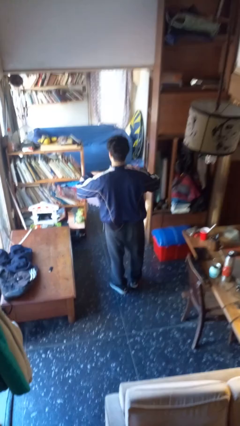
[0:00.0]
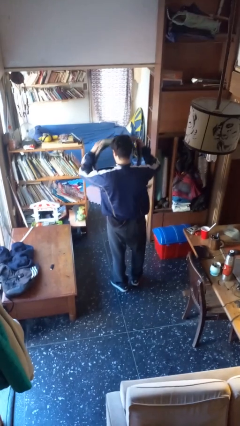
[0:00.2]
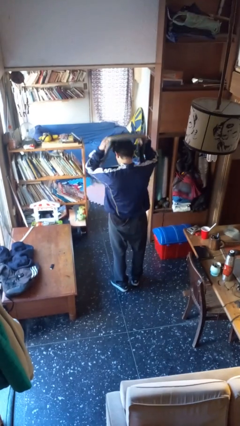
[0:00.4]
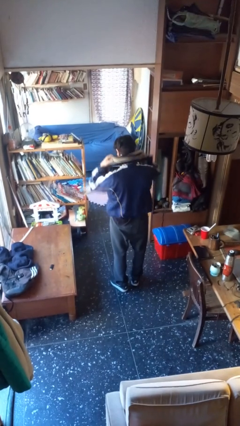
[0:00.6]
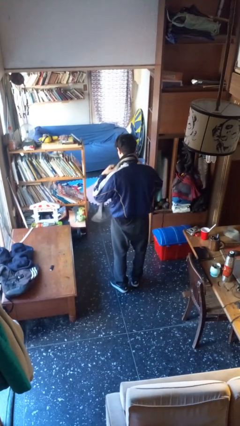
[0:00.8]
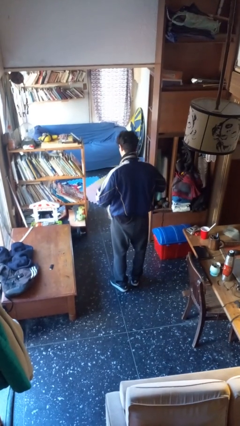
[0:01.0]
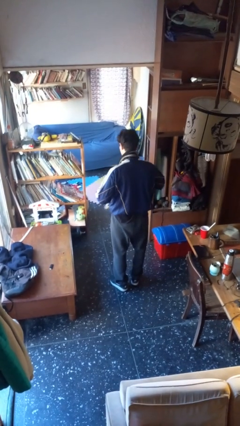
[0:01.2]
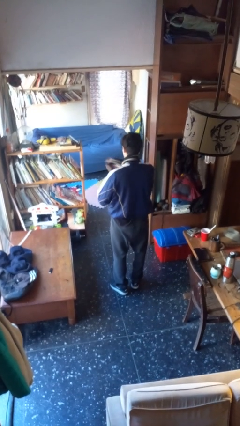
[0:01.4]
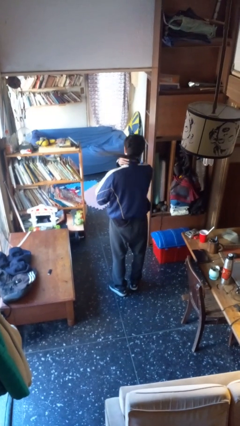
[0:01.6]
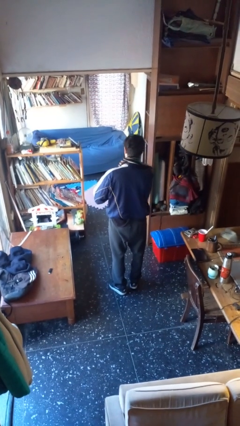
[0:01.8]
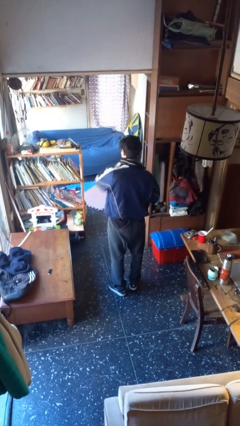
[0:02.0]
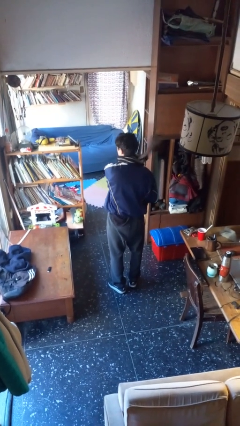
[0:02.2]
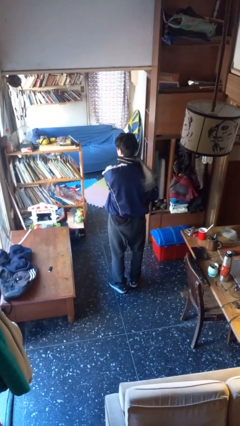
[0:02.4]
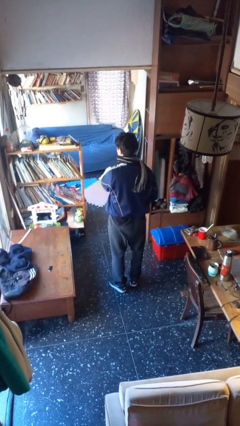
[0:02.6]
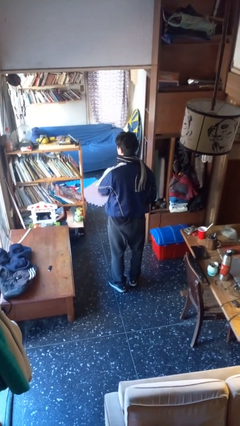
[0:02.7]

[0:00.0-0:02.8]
person puts on scarf

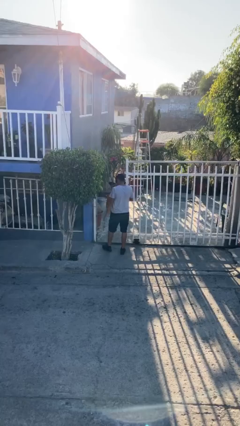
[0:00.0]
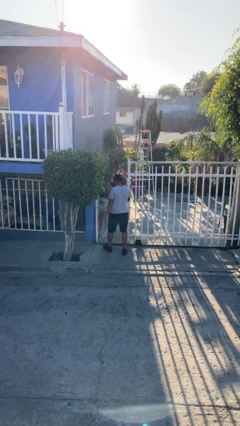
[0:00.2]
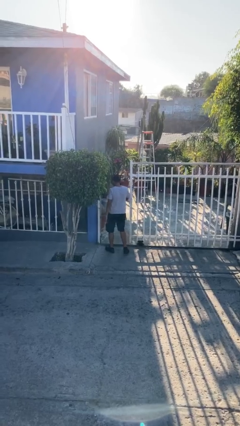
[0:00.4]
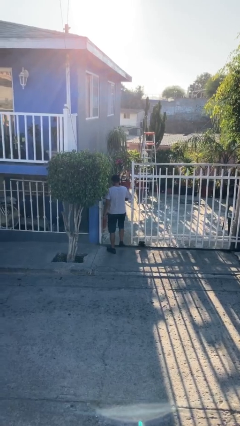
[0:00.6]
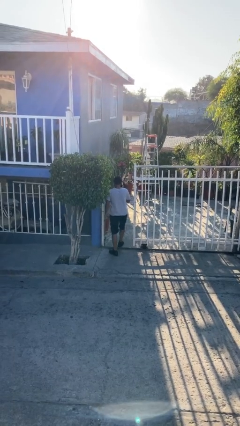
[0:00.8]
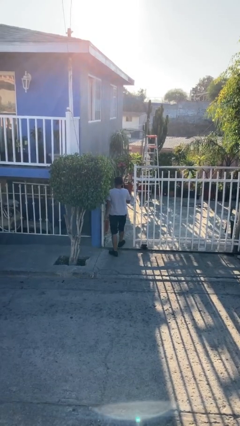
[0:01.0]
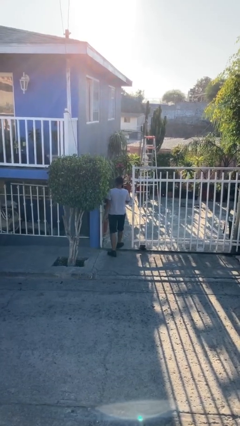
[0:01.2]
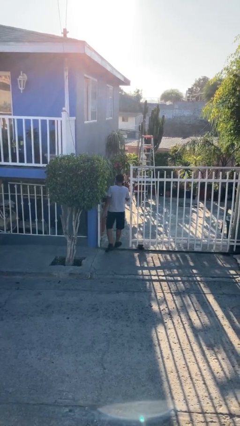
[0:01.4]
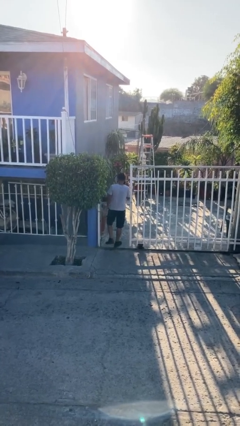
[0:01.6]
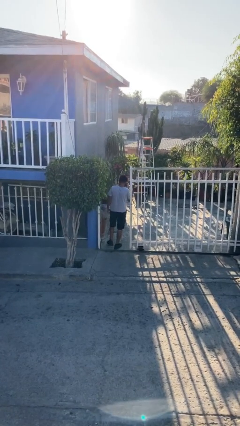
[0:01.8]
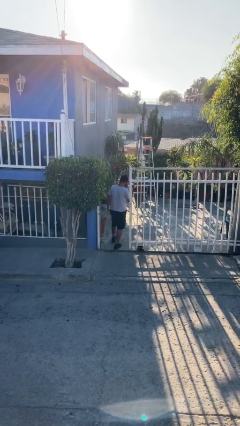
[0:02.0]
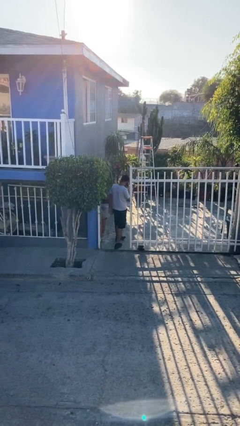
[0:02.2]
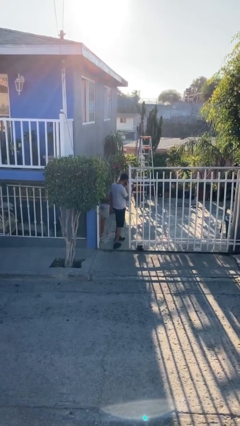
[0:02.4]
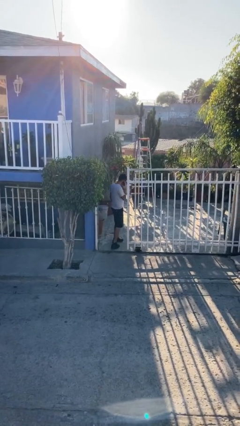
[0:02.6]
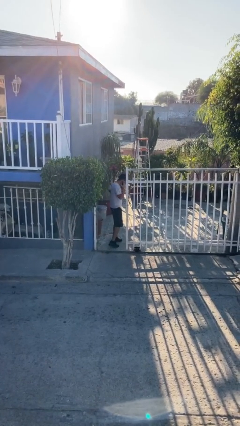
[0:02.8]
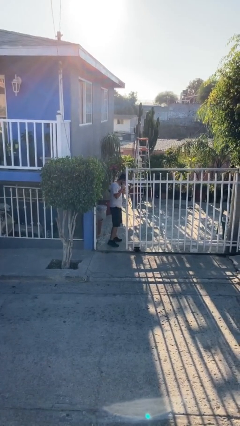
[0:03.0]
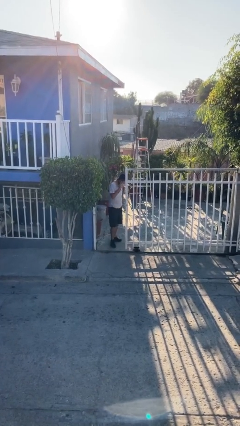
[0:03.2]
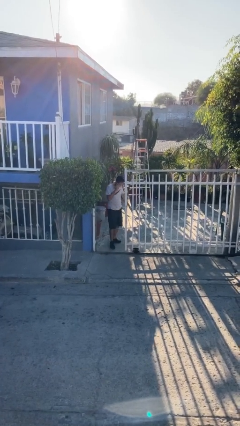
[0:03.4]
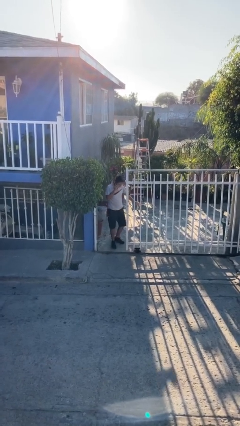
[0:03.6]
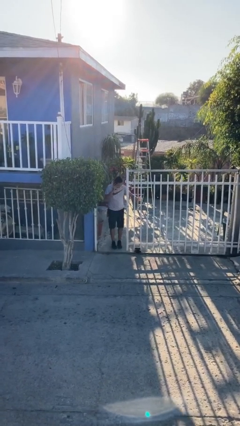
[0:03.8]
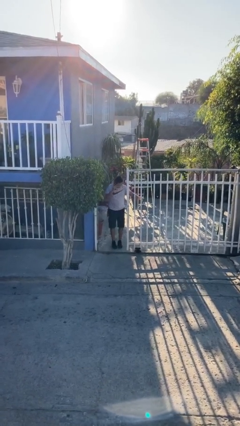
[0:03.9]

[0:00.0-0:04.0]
person exits scene through structure

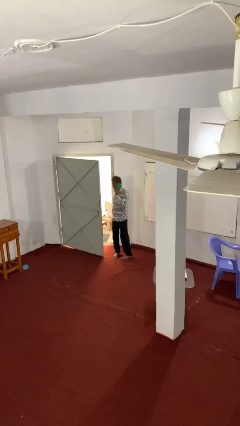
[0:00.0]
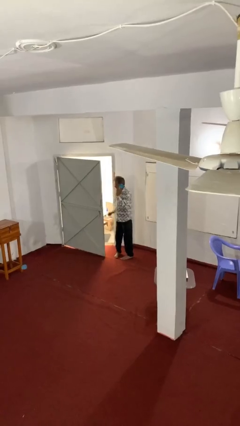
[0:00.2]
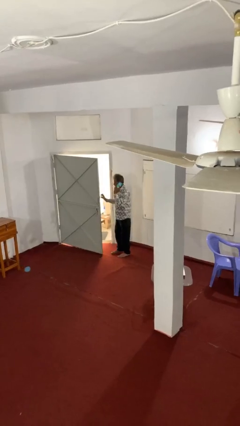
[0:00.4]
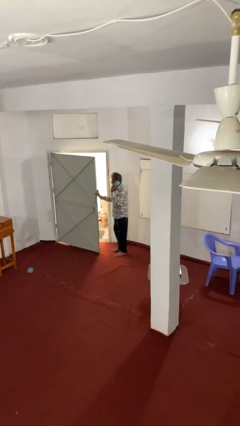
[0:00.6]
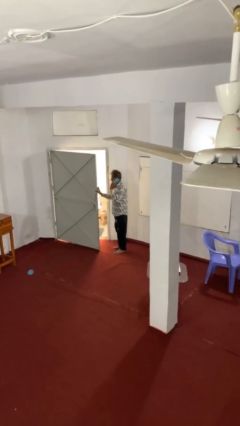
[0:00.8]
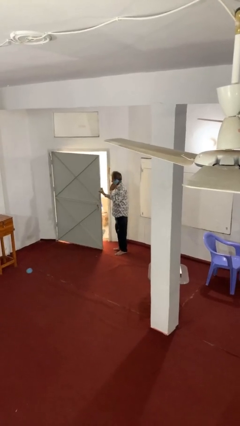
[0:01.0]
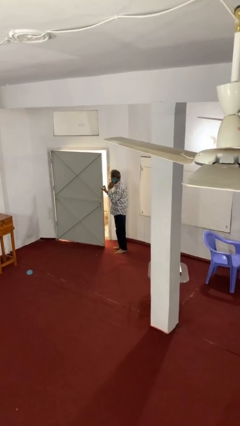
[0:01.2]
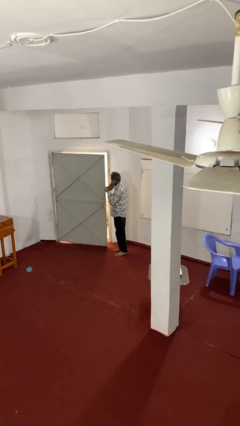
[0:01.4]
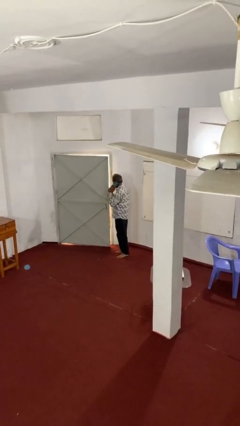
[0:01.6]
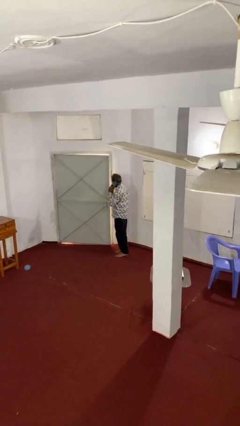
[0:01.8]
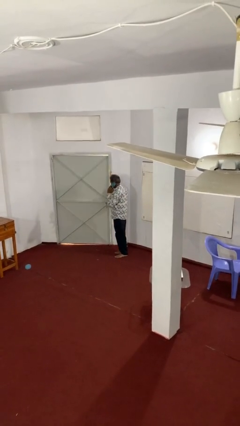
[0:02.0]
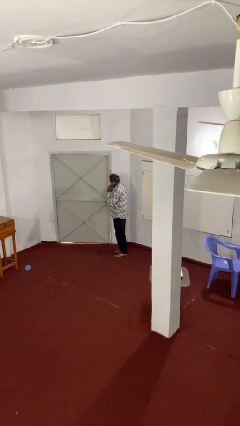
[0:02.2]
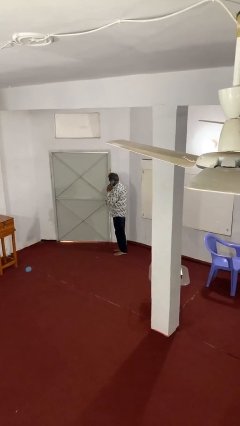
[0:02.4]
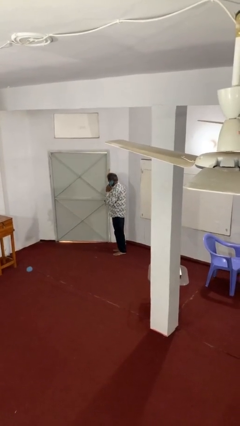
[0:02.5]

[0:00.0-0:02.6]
person closes facility door

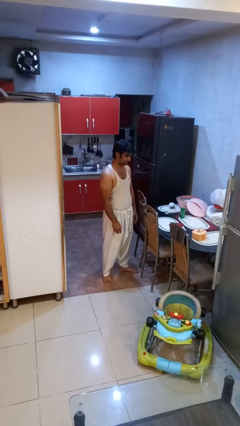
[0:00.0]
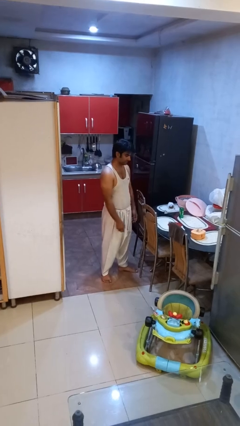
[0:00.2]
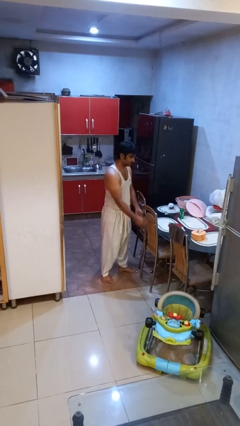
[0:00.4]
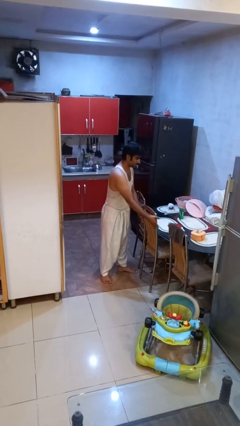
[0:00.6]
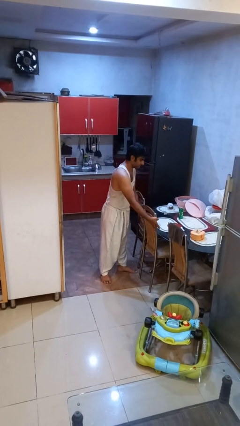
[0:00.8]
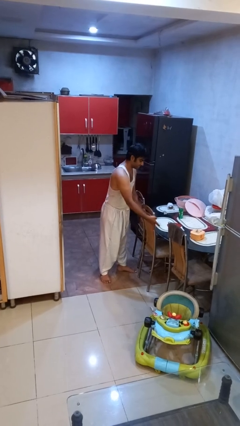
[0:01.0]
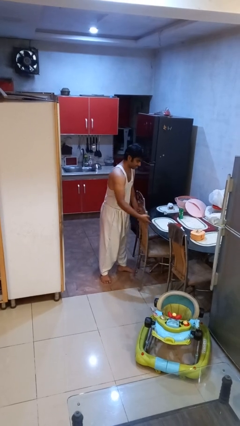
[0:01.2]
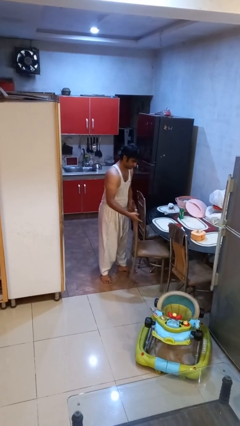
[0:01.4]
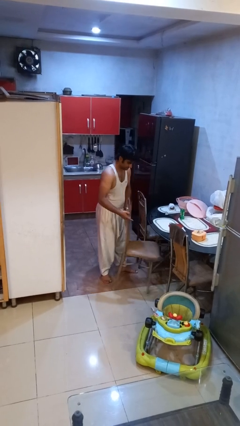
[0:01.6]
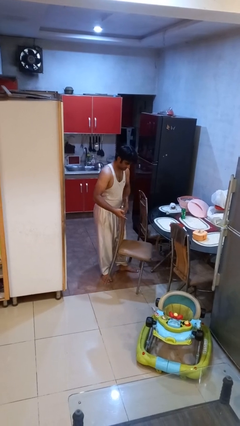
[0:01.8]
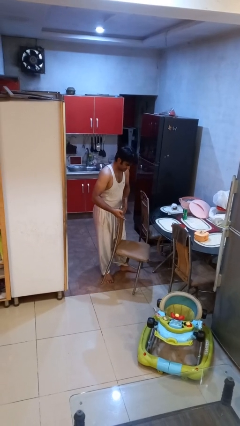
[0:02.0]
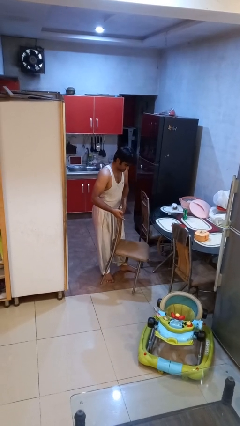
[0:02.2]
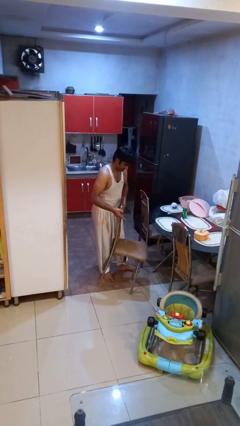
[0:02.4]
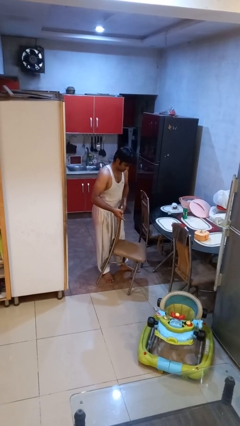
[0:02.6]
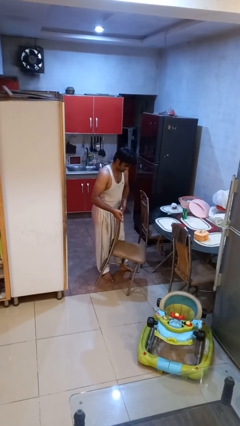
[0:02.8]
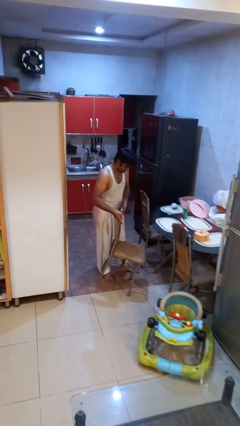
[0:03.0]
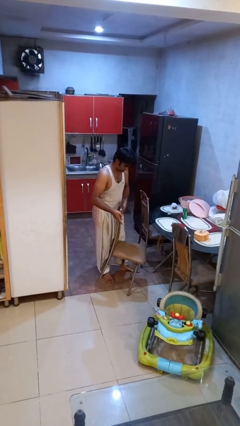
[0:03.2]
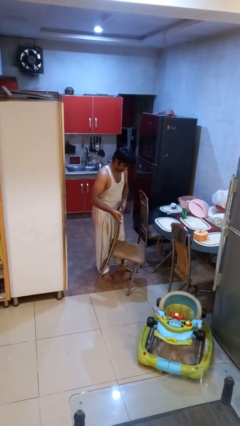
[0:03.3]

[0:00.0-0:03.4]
person pulls out chair

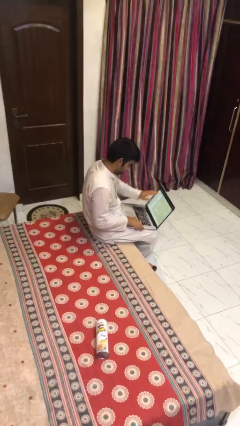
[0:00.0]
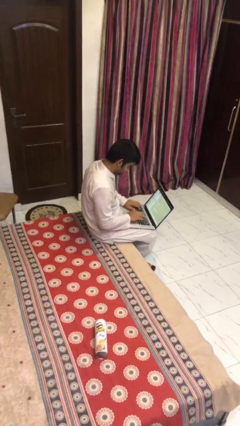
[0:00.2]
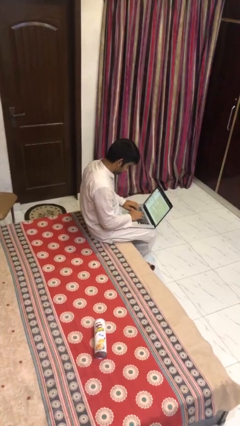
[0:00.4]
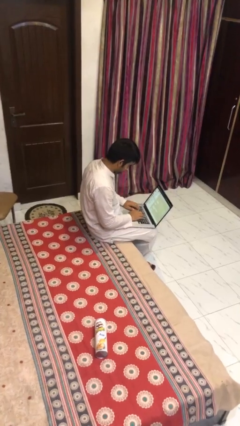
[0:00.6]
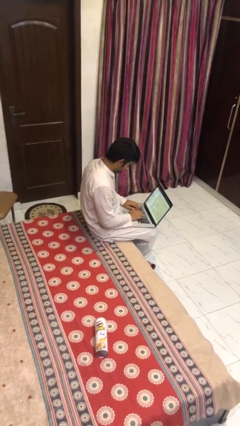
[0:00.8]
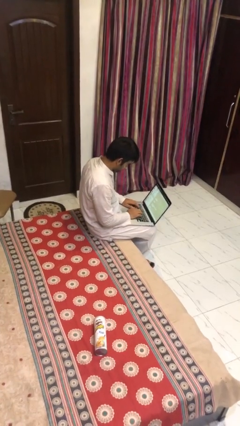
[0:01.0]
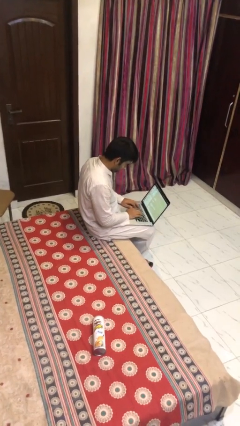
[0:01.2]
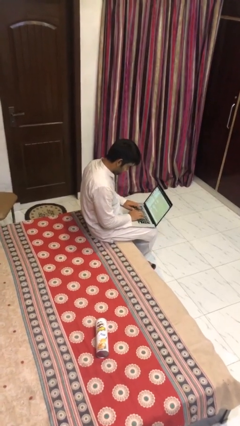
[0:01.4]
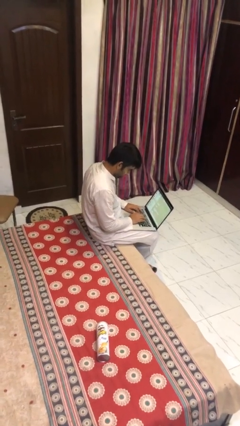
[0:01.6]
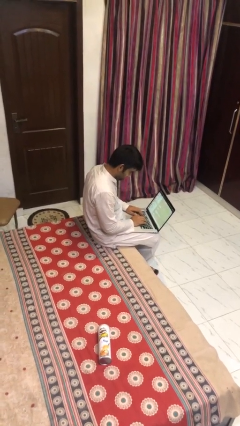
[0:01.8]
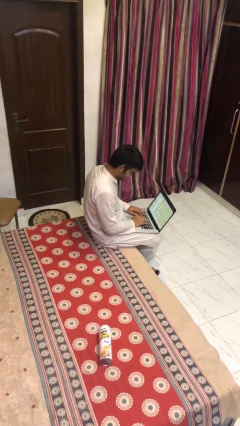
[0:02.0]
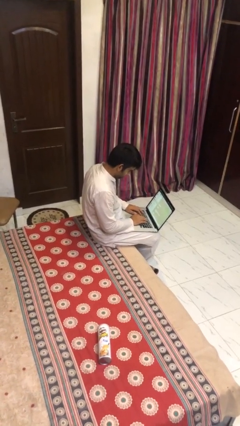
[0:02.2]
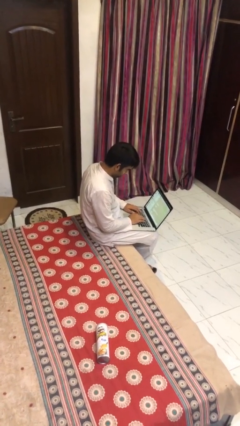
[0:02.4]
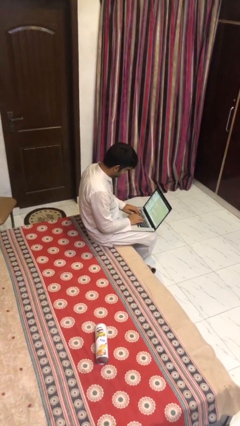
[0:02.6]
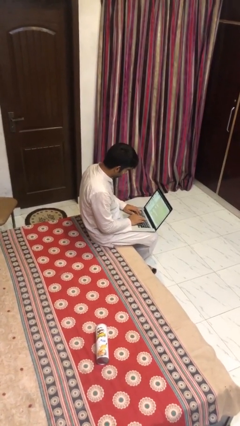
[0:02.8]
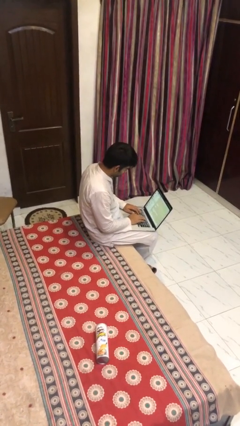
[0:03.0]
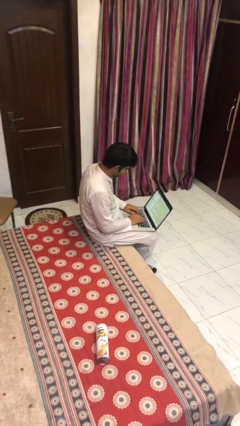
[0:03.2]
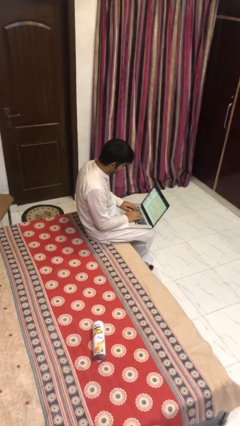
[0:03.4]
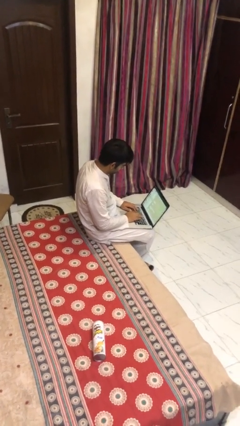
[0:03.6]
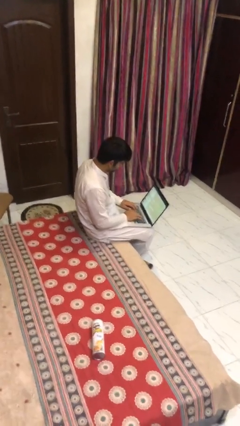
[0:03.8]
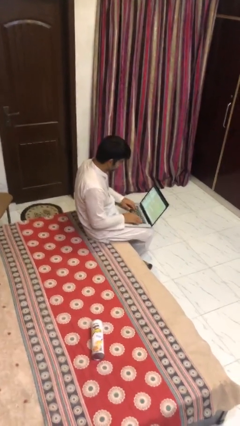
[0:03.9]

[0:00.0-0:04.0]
person interacts with laptop

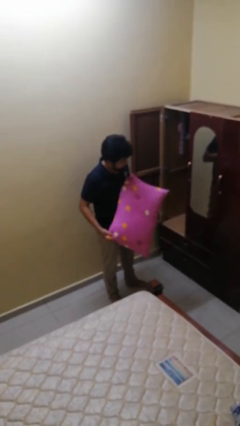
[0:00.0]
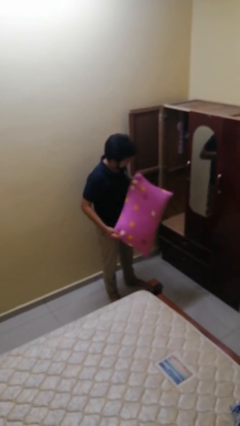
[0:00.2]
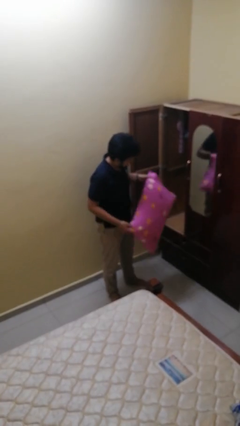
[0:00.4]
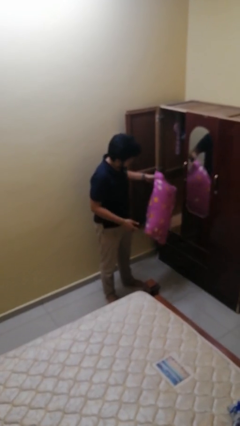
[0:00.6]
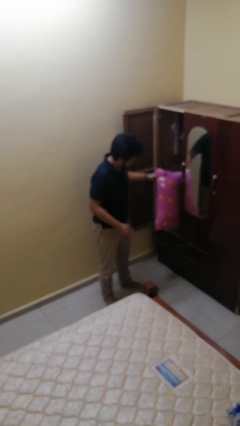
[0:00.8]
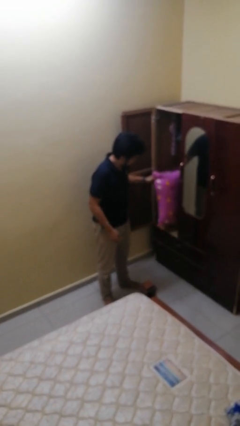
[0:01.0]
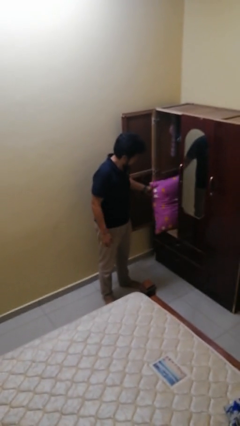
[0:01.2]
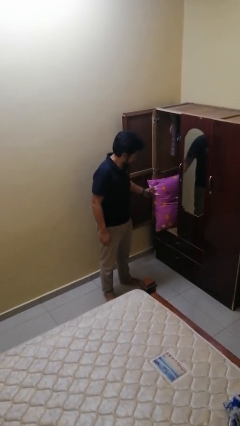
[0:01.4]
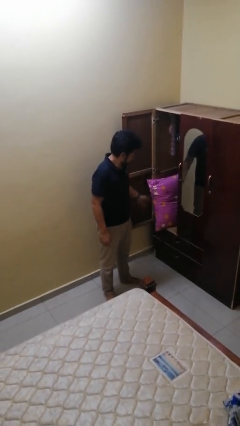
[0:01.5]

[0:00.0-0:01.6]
person puts down object into cabinet
